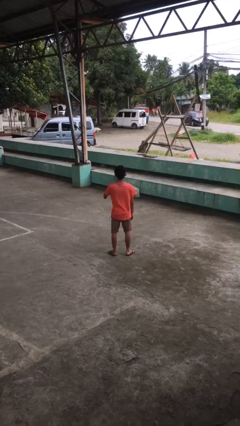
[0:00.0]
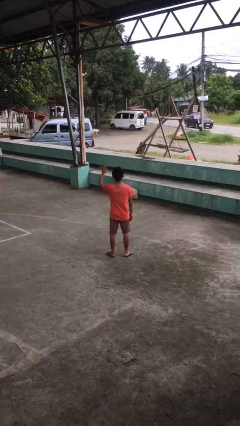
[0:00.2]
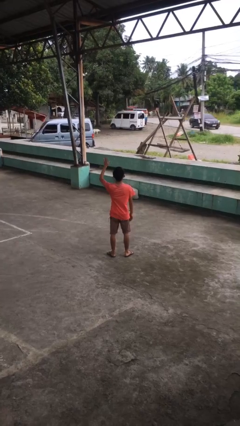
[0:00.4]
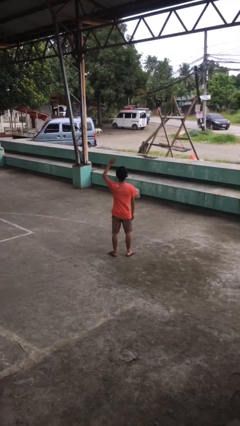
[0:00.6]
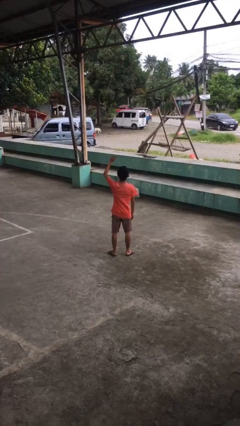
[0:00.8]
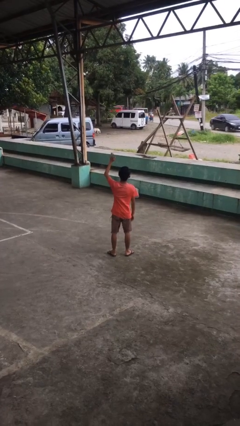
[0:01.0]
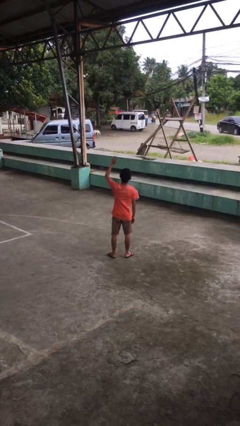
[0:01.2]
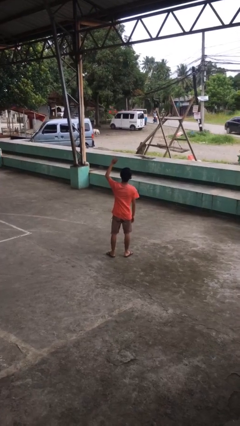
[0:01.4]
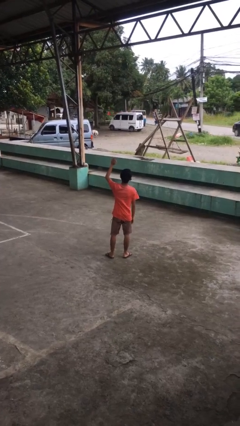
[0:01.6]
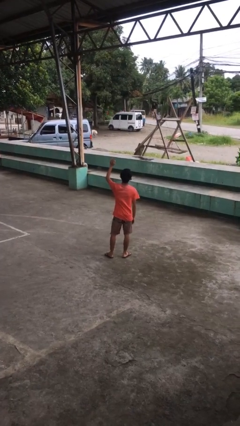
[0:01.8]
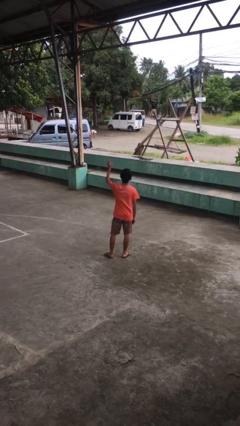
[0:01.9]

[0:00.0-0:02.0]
person waves at person

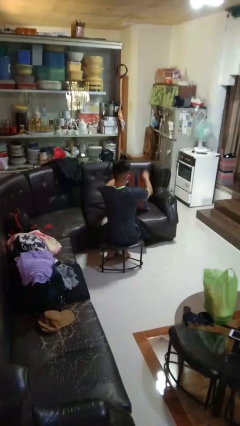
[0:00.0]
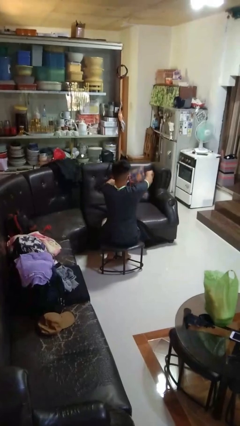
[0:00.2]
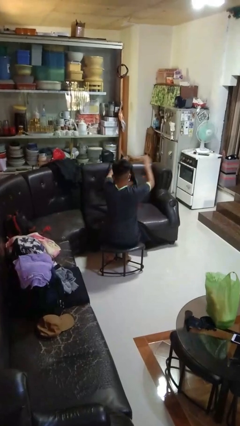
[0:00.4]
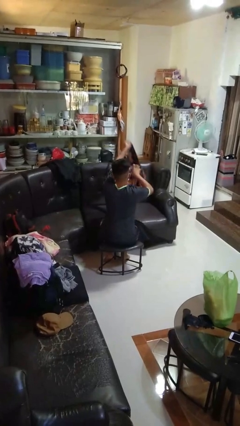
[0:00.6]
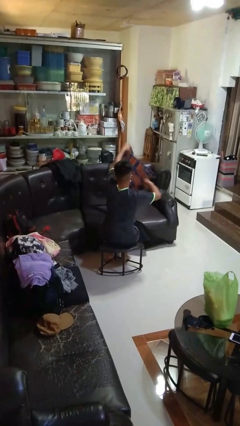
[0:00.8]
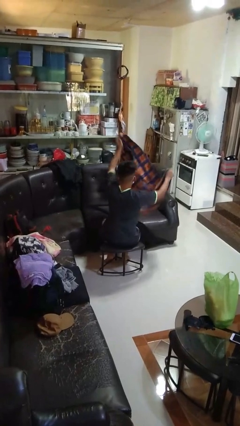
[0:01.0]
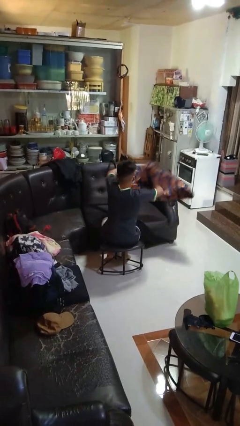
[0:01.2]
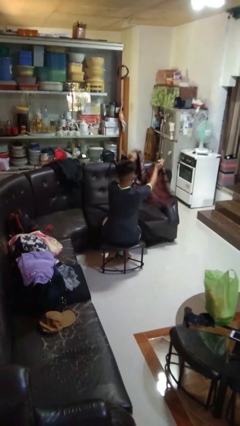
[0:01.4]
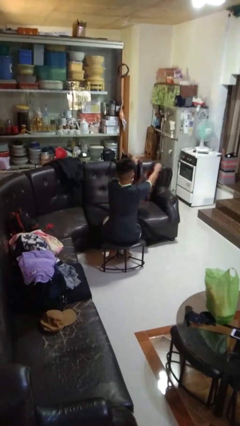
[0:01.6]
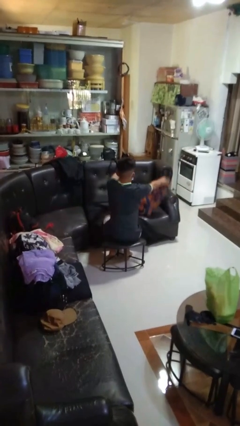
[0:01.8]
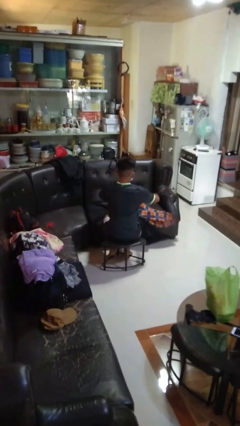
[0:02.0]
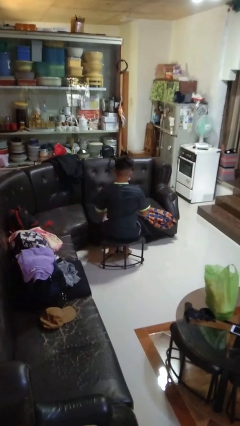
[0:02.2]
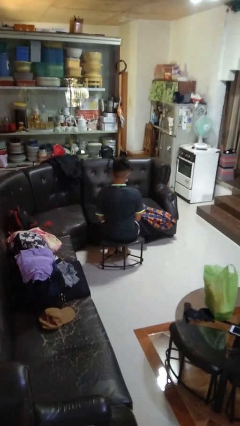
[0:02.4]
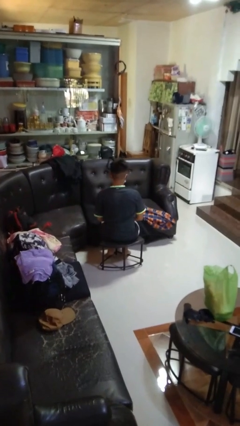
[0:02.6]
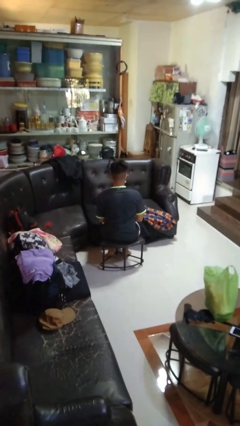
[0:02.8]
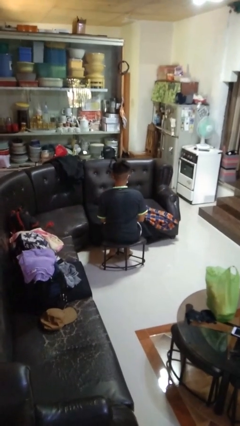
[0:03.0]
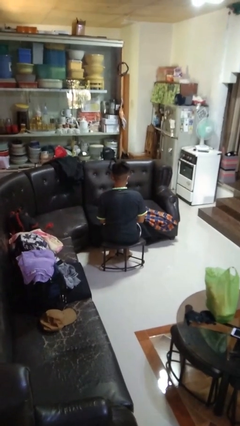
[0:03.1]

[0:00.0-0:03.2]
person unfolds blanket

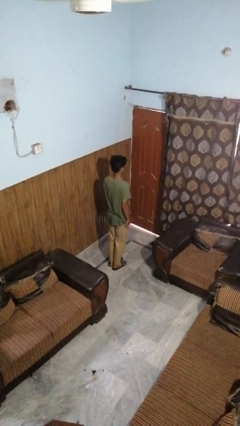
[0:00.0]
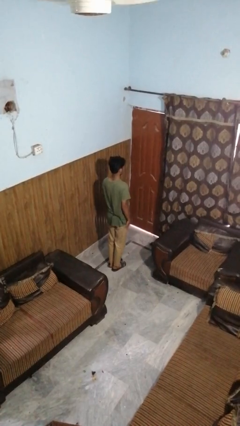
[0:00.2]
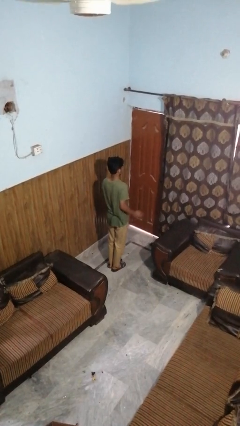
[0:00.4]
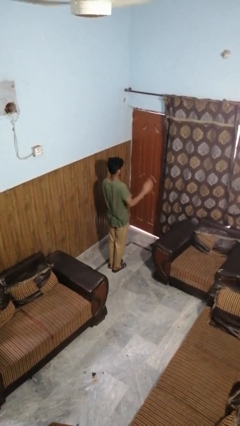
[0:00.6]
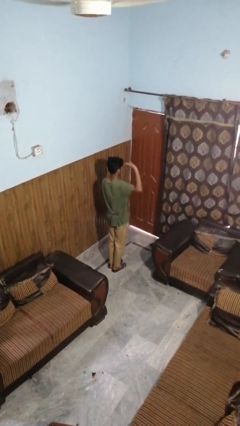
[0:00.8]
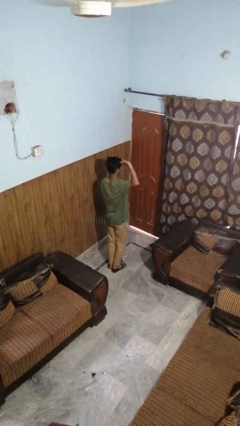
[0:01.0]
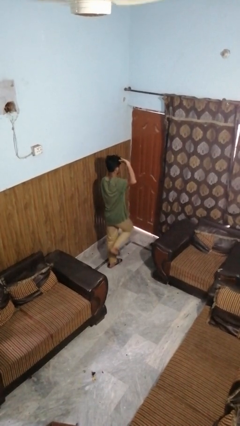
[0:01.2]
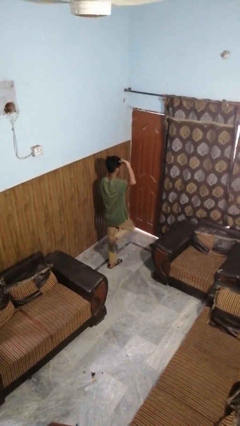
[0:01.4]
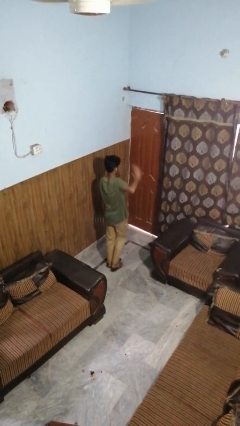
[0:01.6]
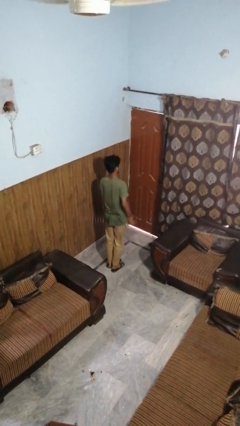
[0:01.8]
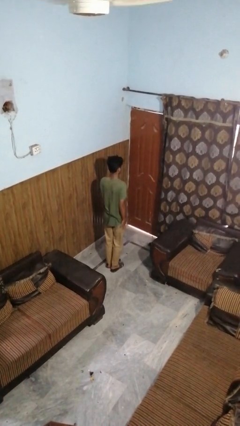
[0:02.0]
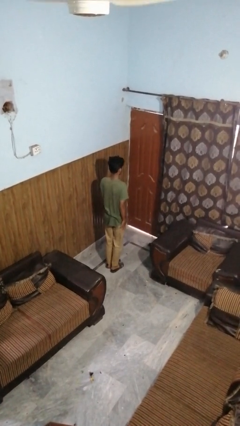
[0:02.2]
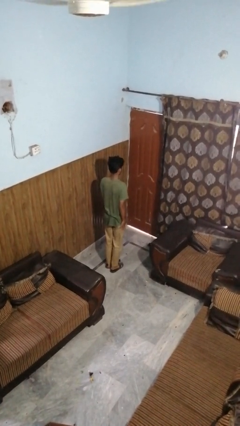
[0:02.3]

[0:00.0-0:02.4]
person salutes

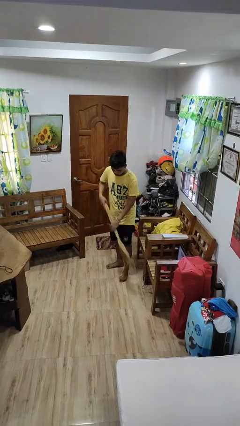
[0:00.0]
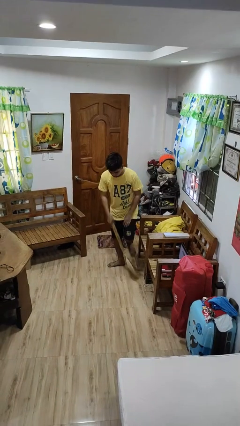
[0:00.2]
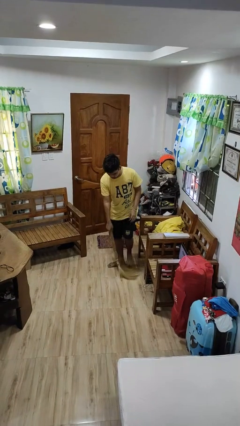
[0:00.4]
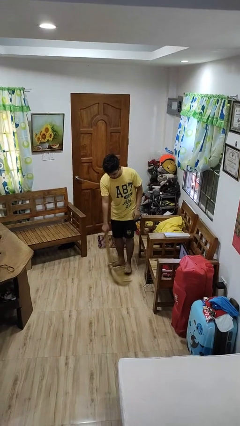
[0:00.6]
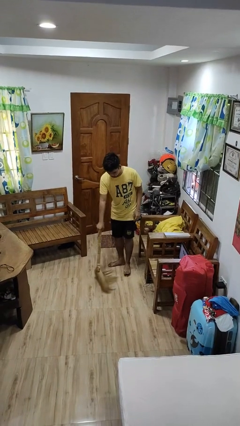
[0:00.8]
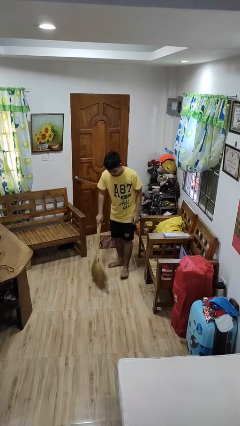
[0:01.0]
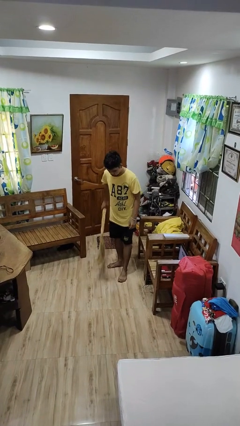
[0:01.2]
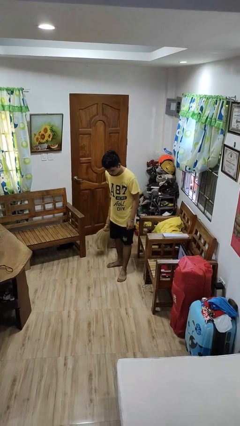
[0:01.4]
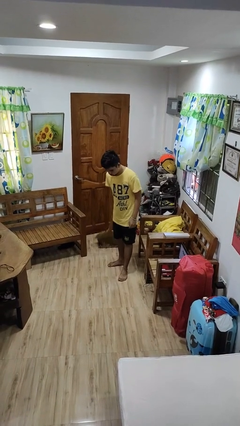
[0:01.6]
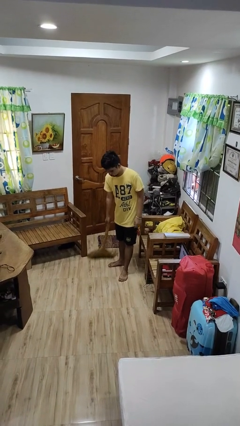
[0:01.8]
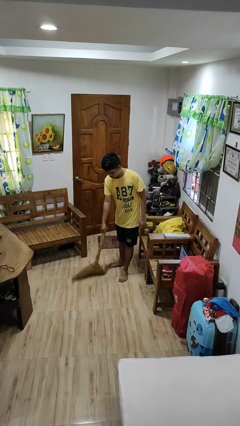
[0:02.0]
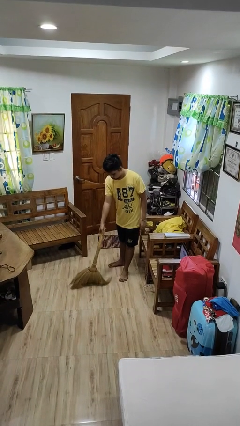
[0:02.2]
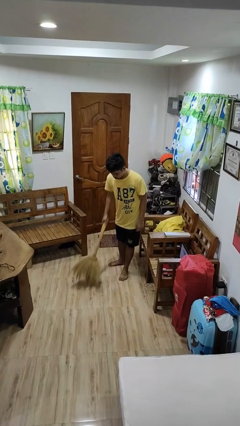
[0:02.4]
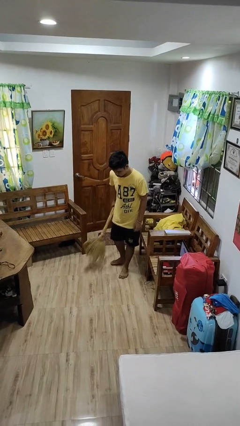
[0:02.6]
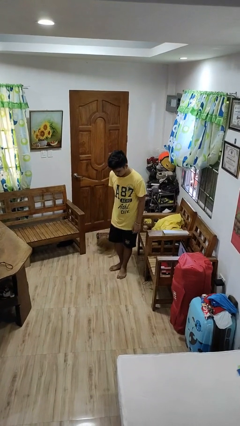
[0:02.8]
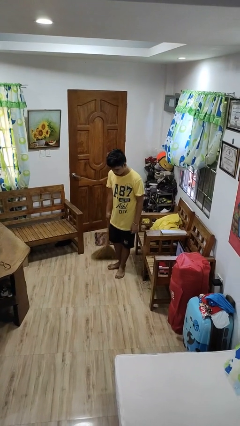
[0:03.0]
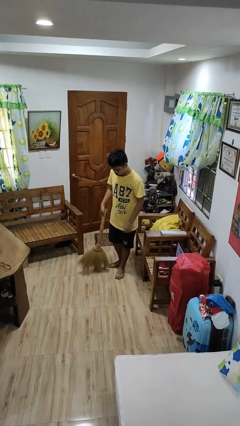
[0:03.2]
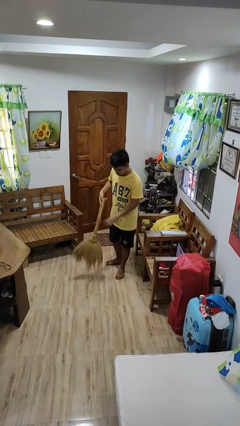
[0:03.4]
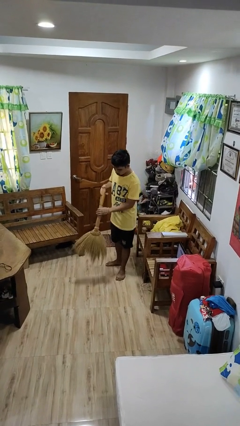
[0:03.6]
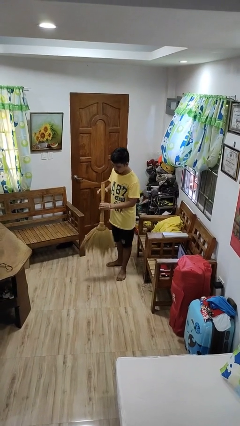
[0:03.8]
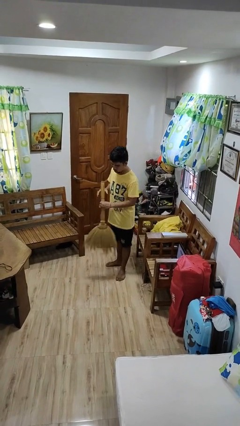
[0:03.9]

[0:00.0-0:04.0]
person sweeps floor

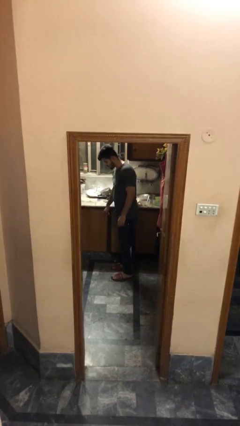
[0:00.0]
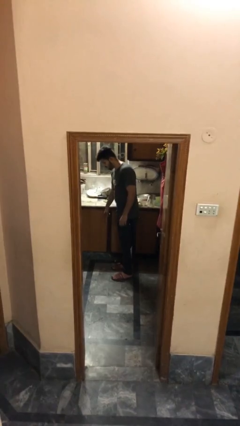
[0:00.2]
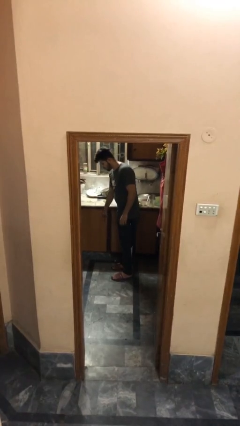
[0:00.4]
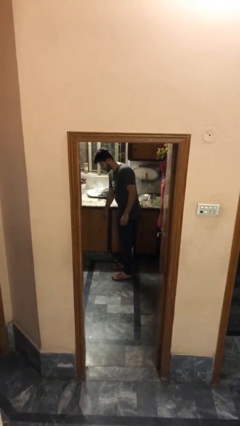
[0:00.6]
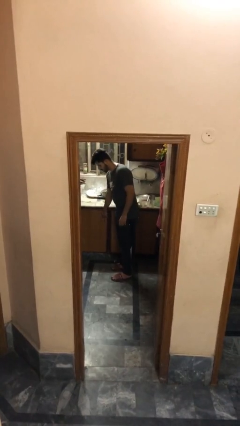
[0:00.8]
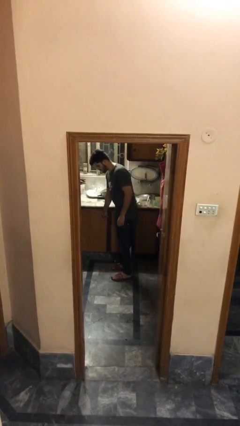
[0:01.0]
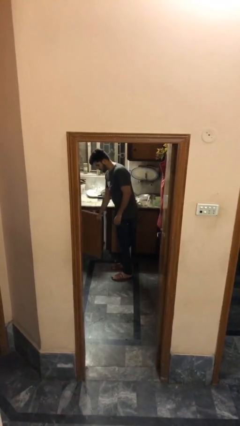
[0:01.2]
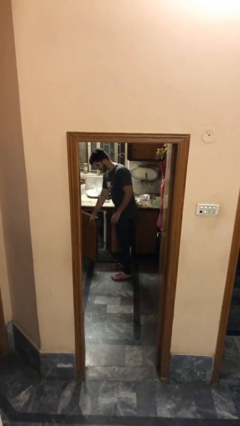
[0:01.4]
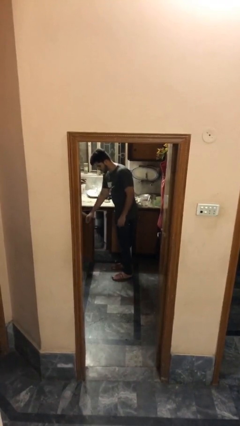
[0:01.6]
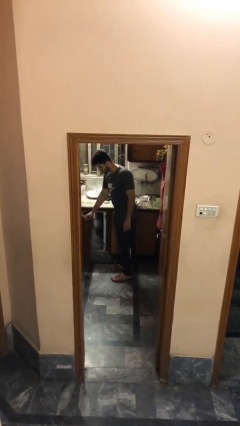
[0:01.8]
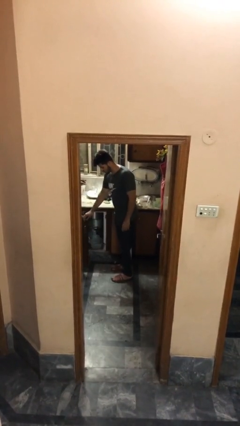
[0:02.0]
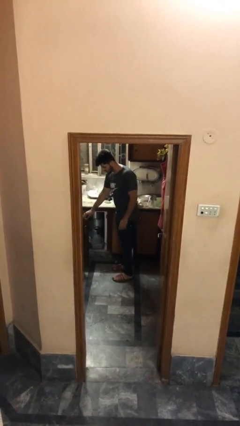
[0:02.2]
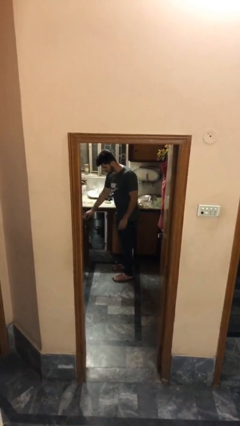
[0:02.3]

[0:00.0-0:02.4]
person opens cabinet

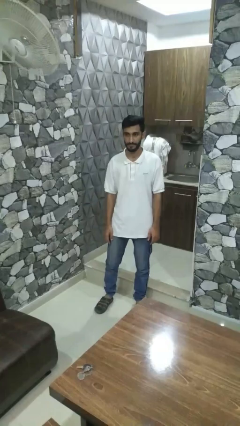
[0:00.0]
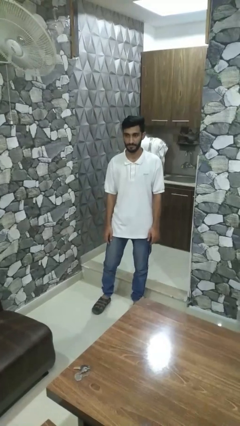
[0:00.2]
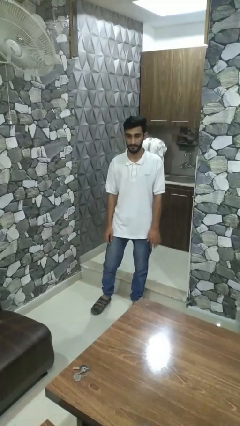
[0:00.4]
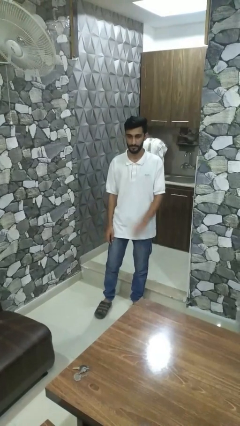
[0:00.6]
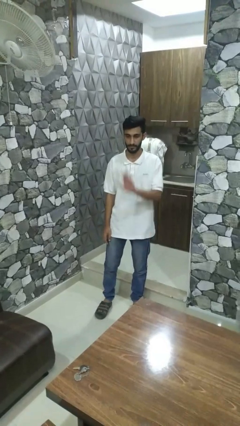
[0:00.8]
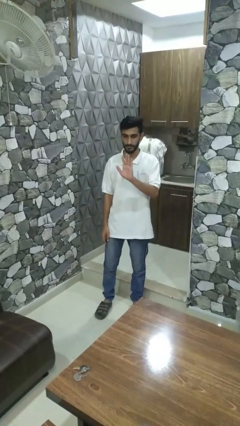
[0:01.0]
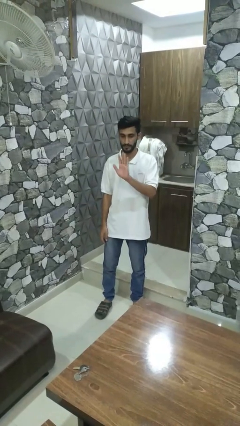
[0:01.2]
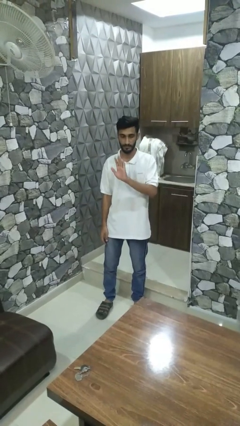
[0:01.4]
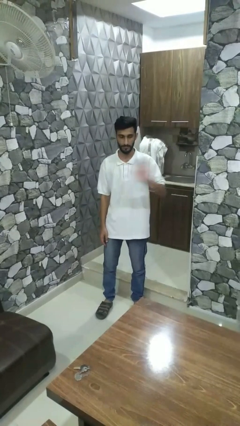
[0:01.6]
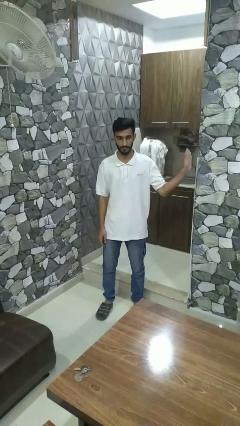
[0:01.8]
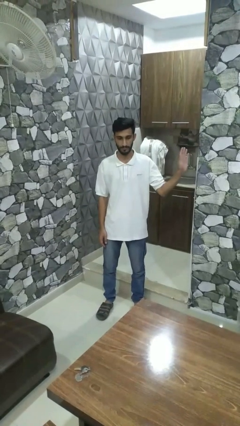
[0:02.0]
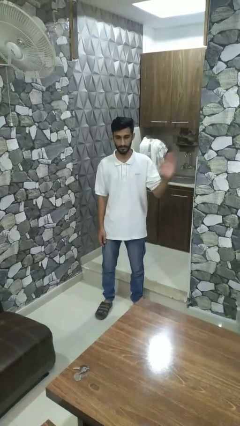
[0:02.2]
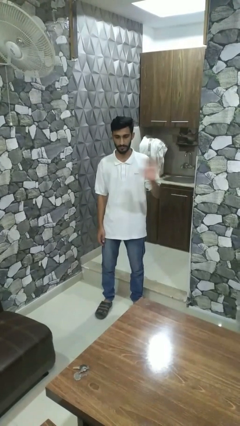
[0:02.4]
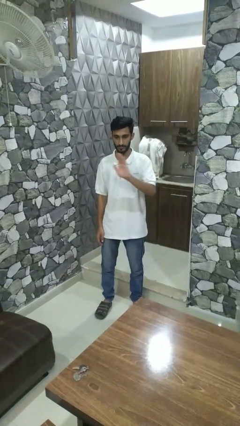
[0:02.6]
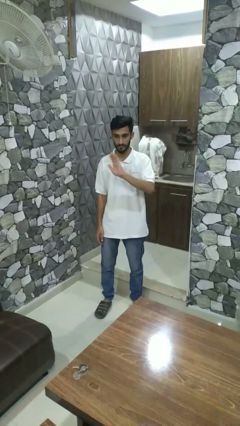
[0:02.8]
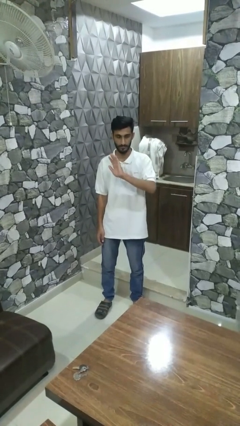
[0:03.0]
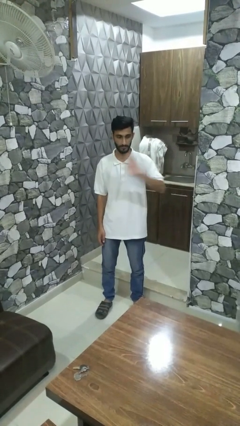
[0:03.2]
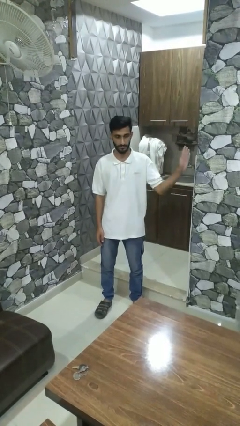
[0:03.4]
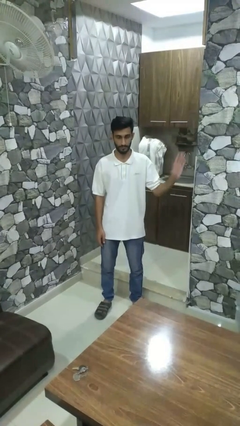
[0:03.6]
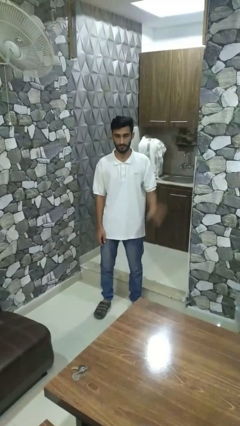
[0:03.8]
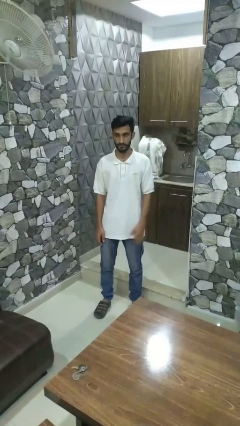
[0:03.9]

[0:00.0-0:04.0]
person gestures swipe left
